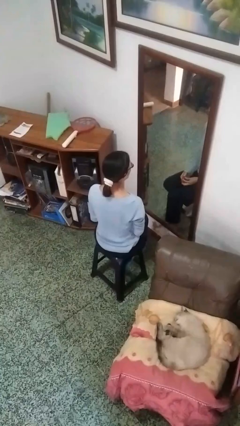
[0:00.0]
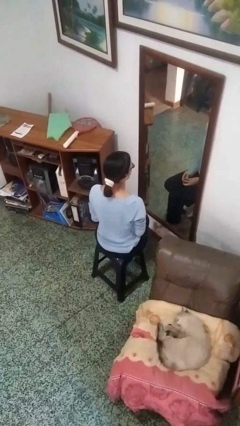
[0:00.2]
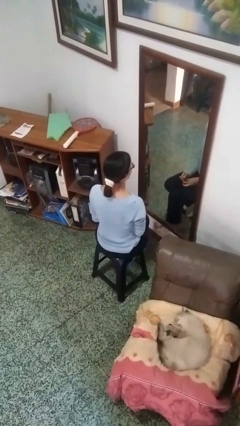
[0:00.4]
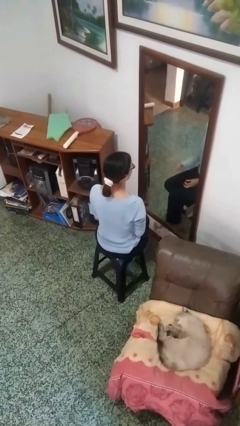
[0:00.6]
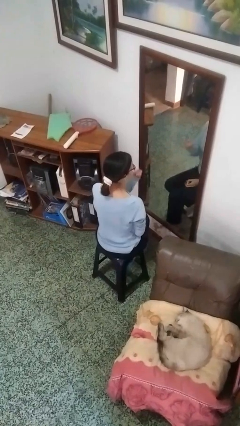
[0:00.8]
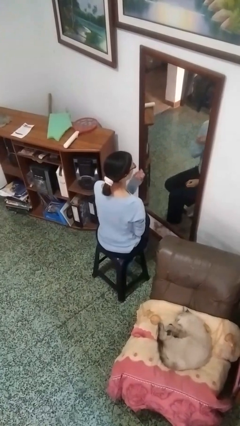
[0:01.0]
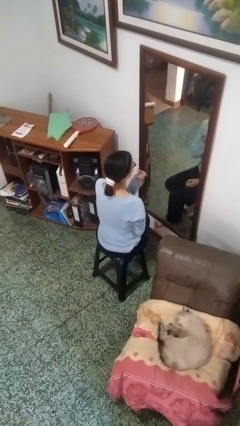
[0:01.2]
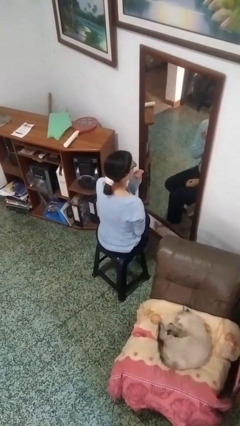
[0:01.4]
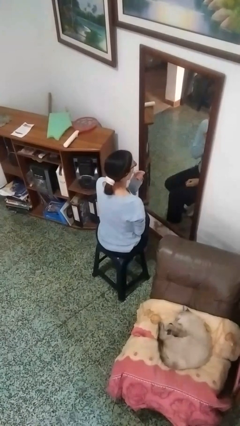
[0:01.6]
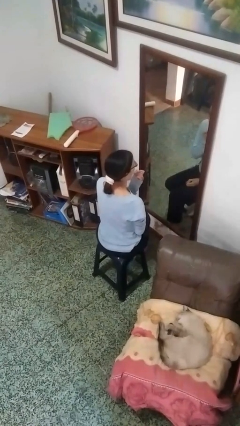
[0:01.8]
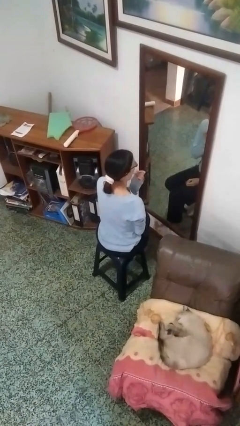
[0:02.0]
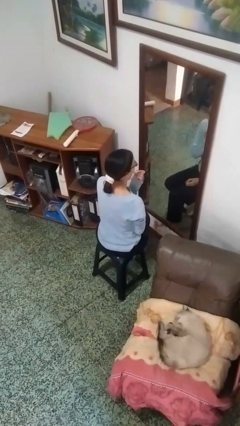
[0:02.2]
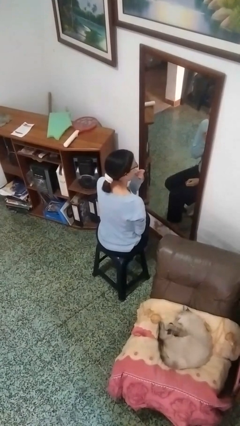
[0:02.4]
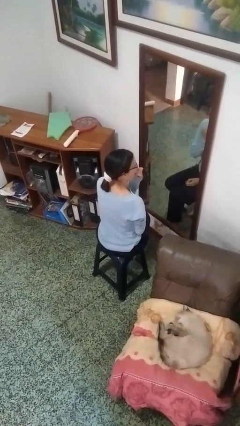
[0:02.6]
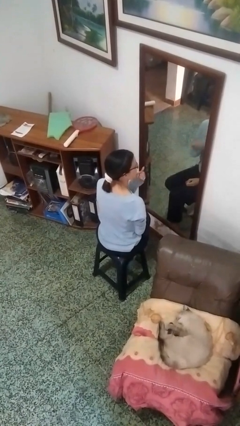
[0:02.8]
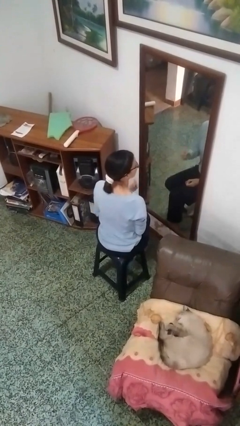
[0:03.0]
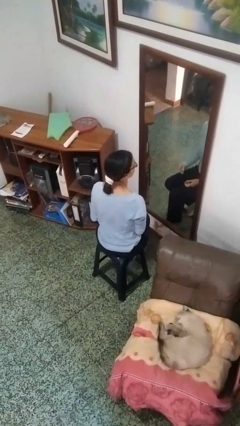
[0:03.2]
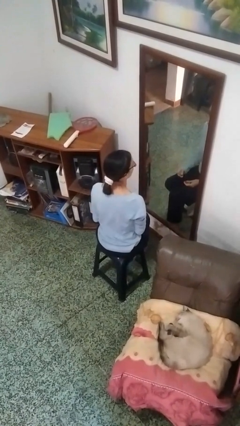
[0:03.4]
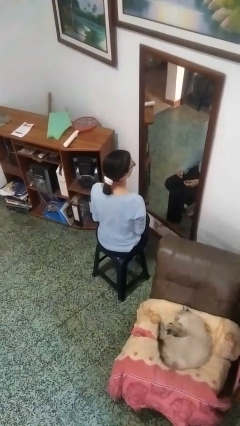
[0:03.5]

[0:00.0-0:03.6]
person applies lip makeup

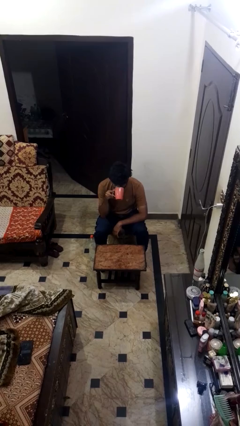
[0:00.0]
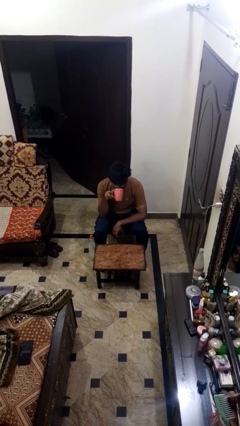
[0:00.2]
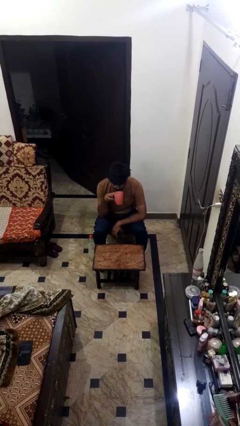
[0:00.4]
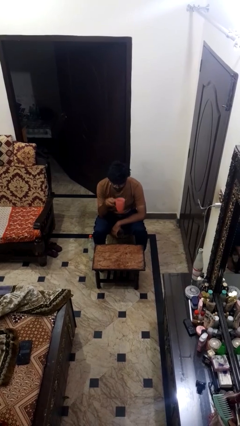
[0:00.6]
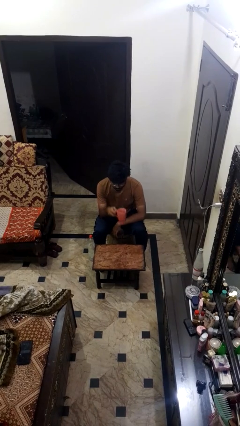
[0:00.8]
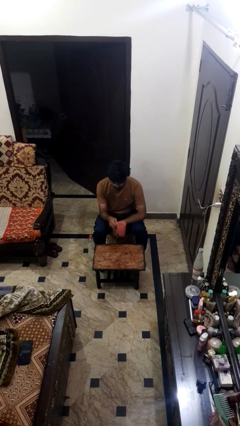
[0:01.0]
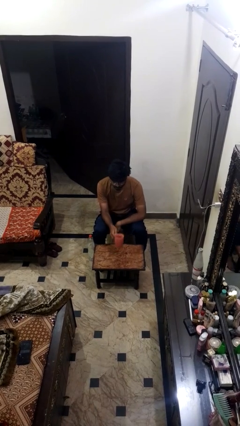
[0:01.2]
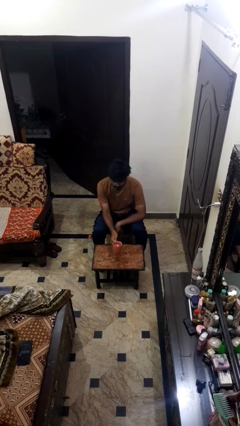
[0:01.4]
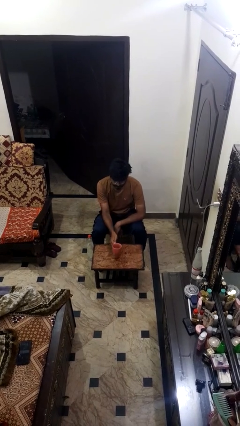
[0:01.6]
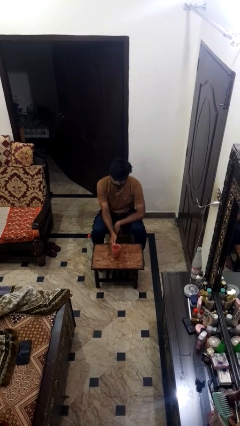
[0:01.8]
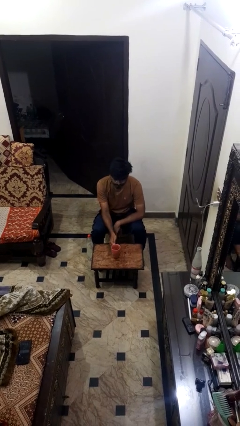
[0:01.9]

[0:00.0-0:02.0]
person puts down object on table

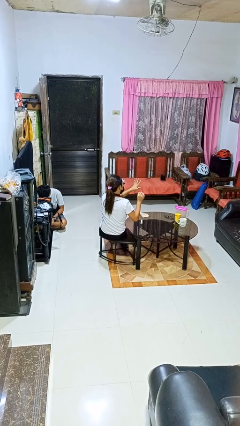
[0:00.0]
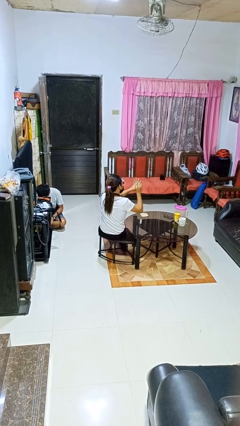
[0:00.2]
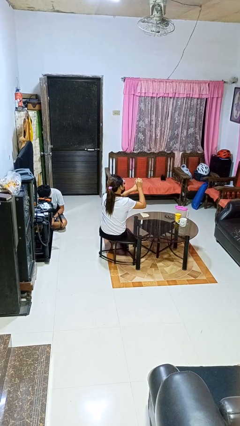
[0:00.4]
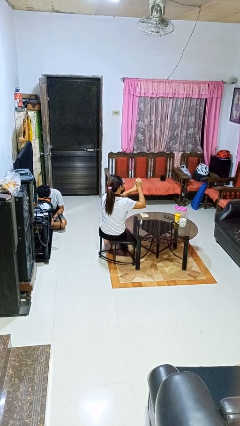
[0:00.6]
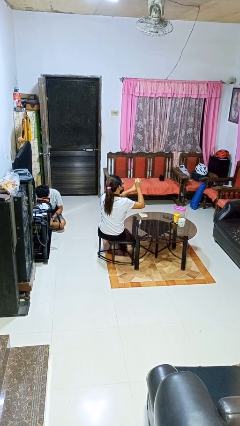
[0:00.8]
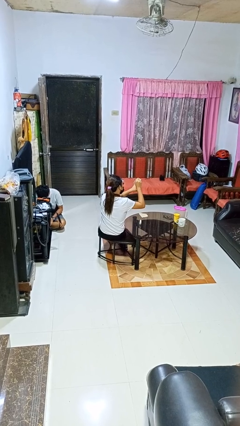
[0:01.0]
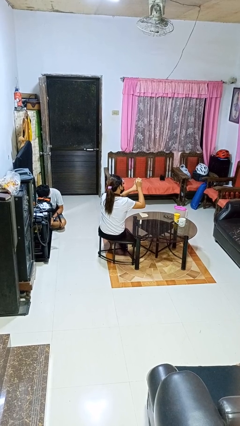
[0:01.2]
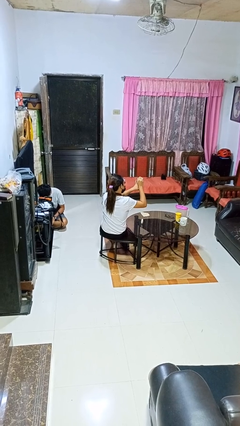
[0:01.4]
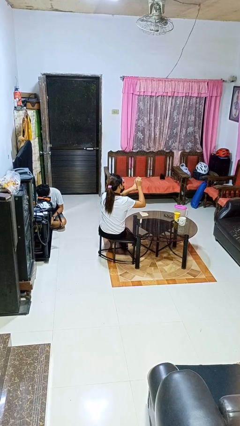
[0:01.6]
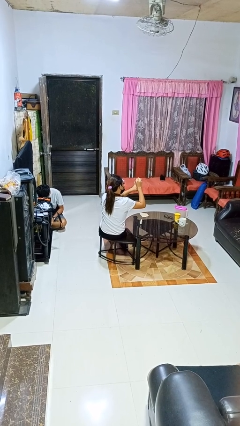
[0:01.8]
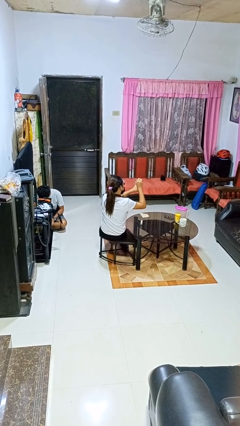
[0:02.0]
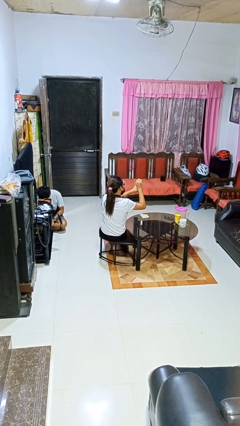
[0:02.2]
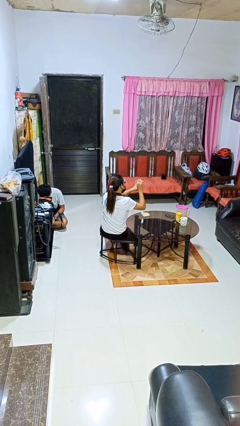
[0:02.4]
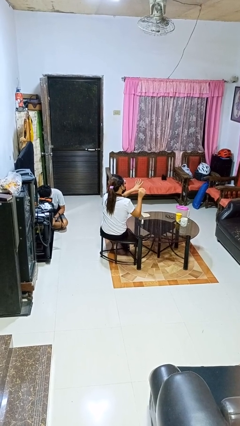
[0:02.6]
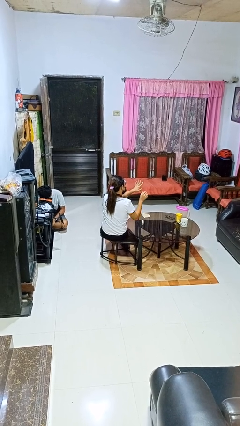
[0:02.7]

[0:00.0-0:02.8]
person paints fingernails

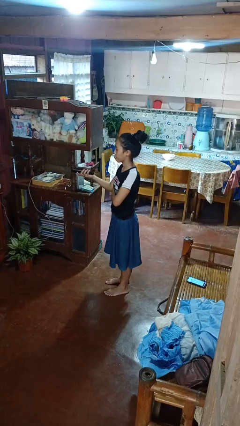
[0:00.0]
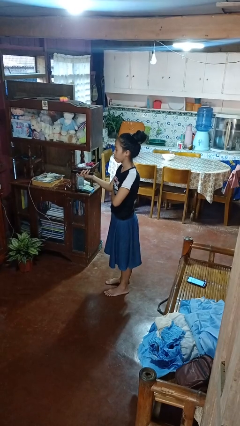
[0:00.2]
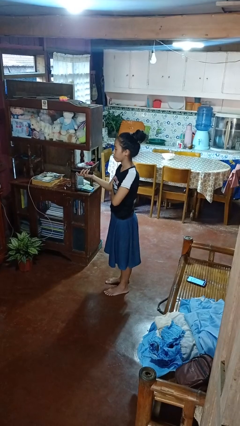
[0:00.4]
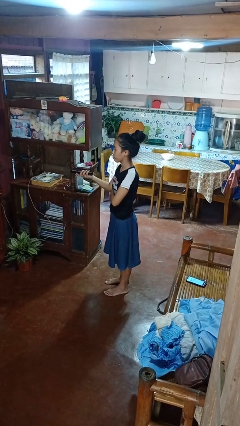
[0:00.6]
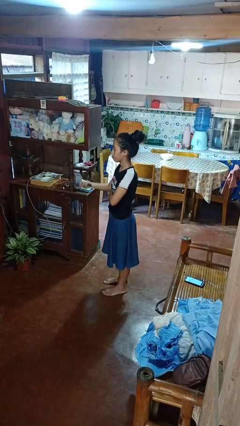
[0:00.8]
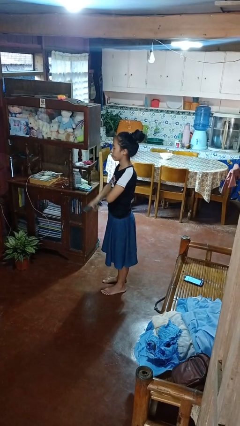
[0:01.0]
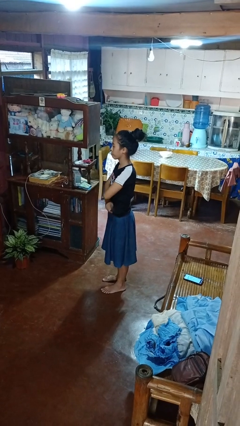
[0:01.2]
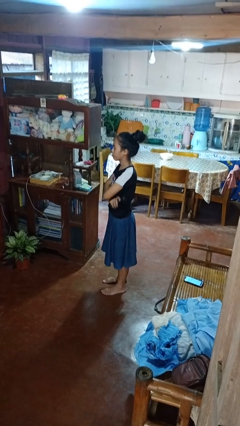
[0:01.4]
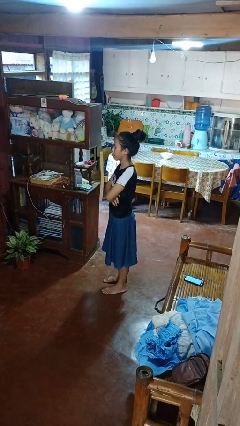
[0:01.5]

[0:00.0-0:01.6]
person uses television remote

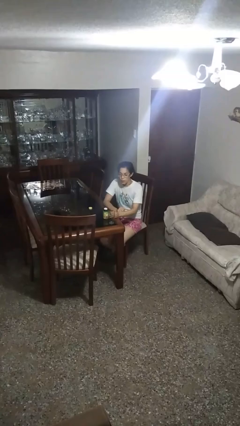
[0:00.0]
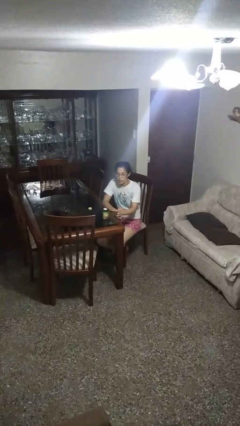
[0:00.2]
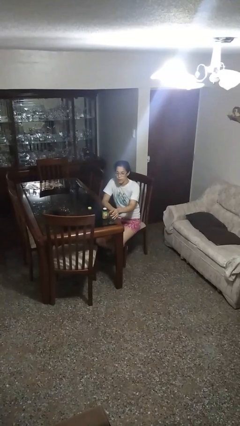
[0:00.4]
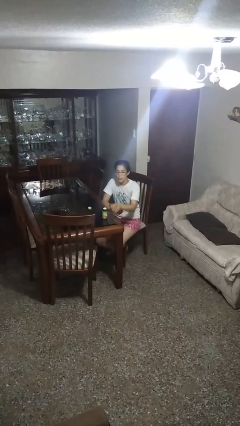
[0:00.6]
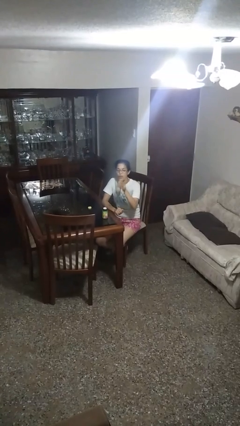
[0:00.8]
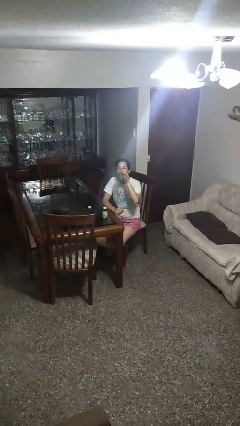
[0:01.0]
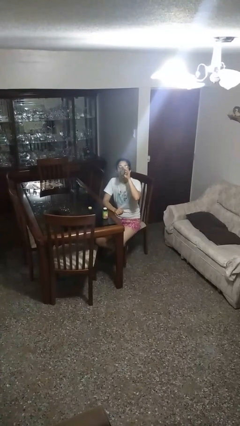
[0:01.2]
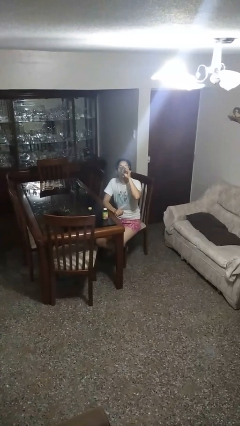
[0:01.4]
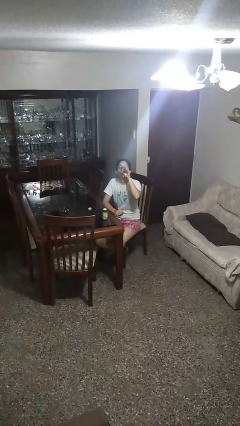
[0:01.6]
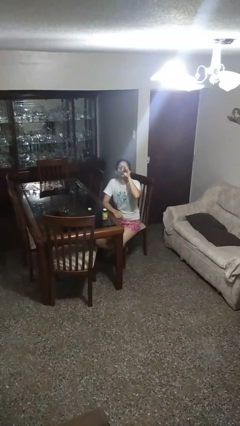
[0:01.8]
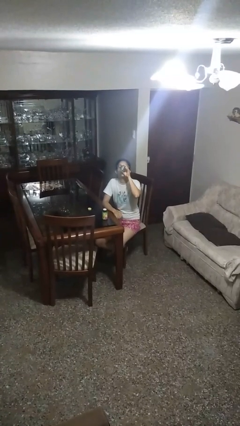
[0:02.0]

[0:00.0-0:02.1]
person drinks from cup

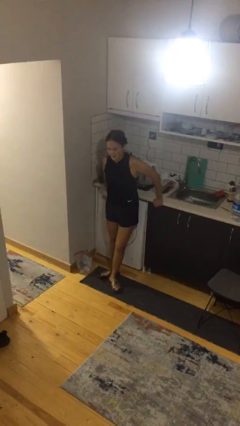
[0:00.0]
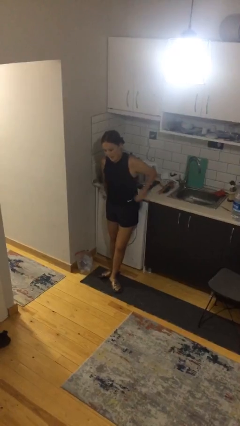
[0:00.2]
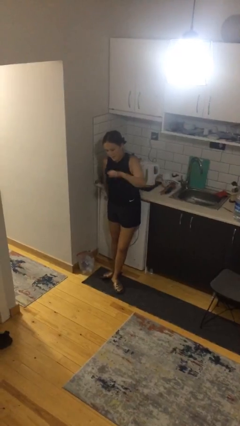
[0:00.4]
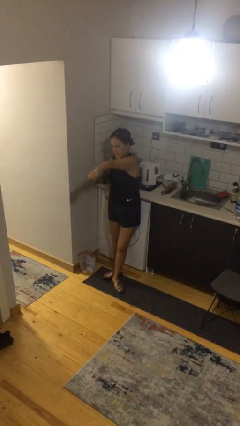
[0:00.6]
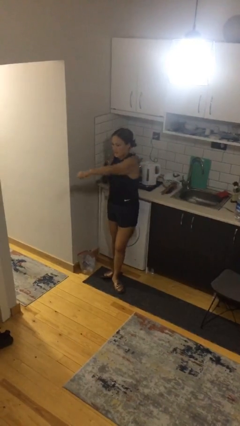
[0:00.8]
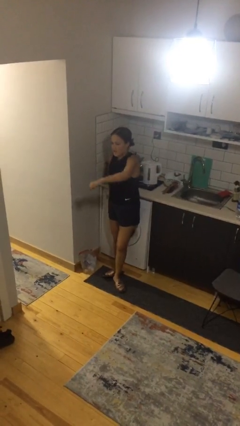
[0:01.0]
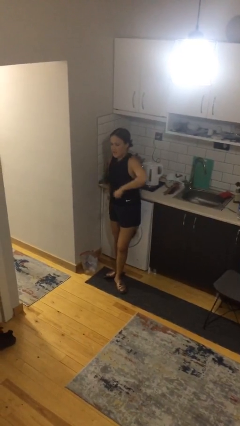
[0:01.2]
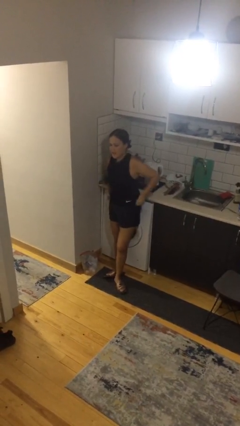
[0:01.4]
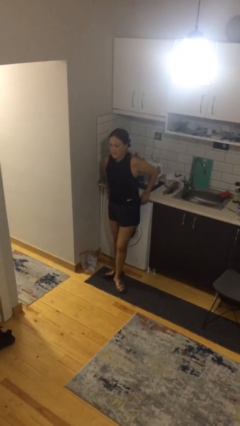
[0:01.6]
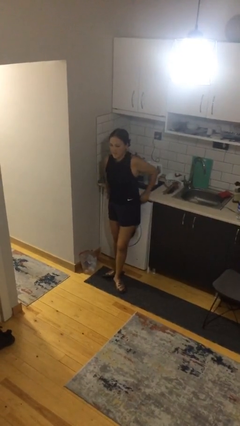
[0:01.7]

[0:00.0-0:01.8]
person punches

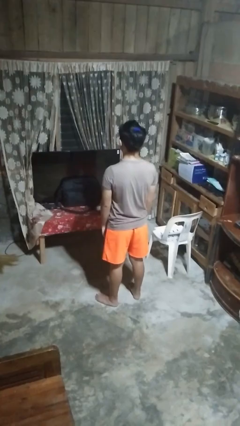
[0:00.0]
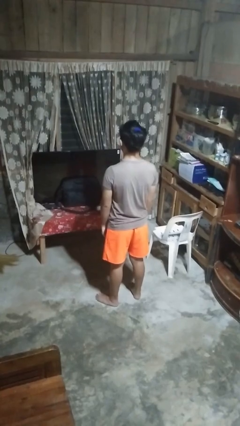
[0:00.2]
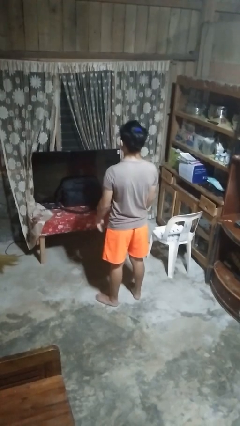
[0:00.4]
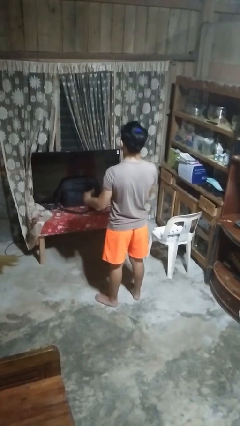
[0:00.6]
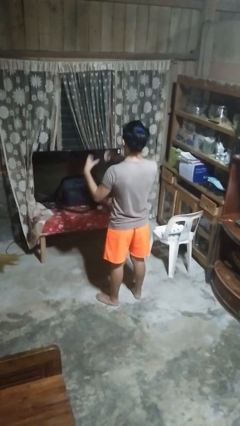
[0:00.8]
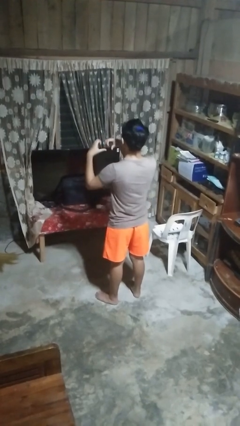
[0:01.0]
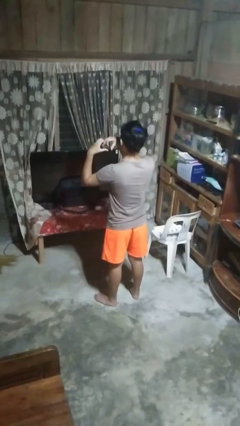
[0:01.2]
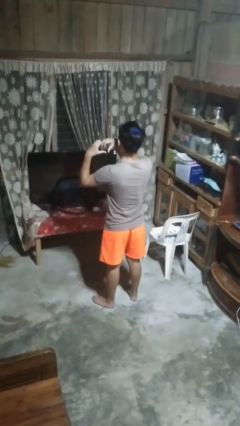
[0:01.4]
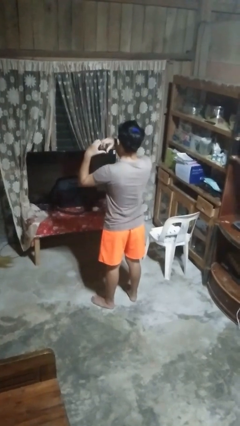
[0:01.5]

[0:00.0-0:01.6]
person gestures heart

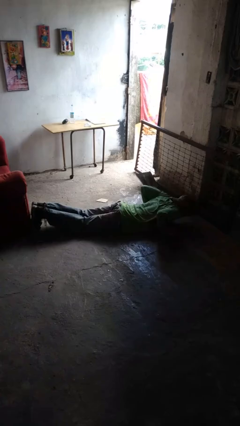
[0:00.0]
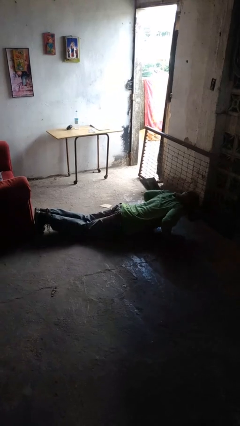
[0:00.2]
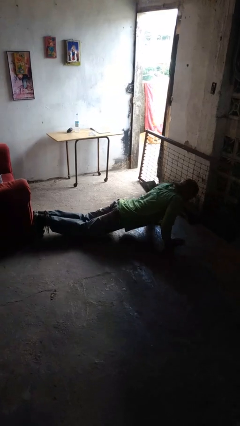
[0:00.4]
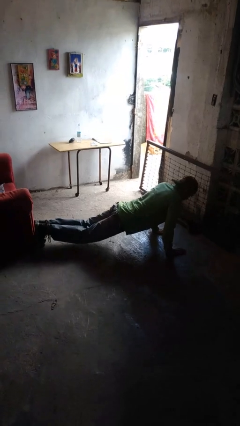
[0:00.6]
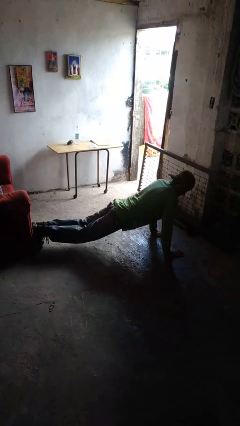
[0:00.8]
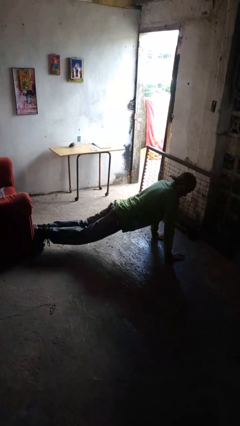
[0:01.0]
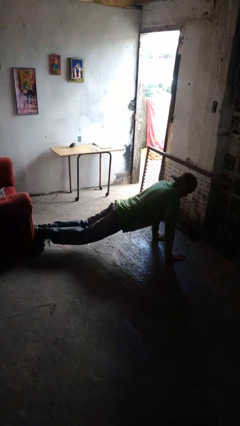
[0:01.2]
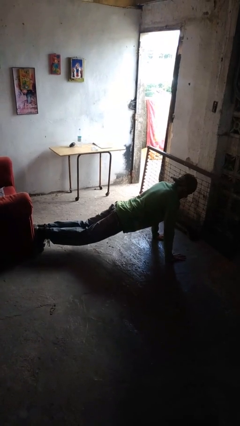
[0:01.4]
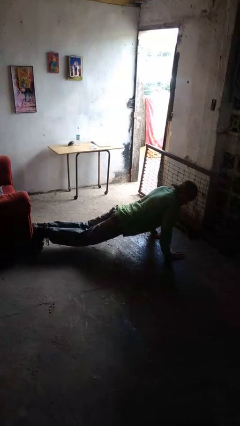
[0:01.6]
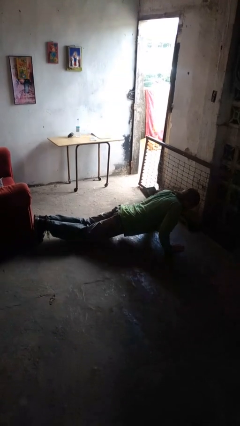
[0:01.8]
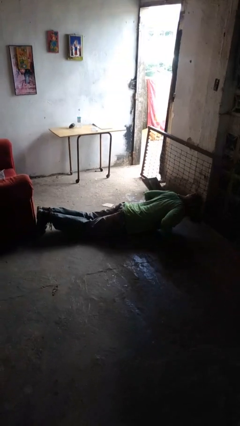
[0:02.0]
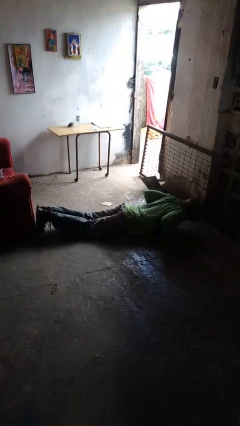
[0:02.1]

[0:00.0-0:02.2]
person exercises with pushup
